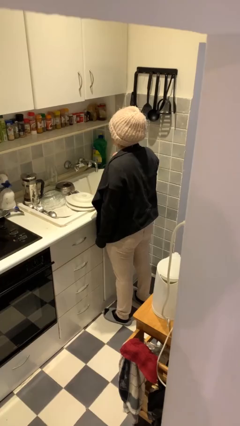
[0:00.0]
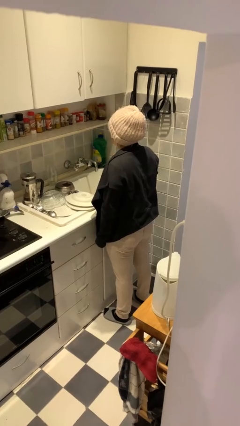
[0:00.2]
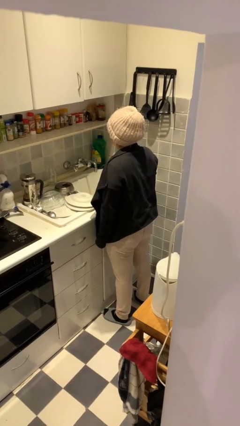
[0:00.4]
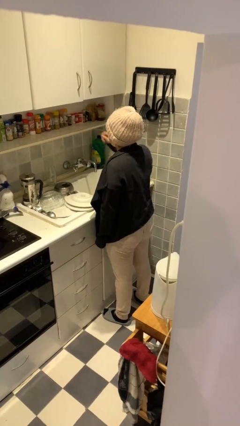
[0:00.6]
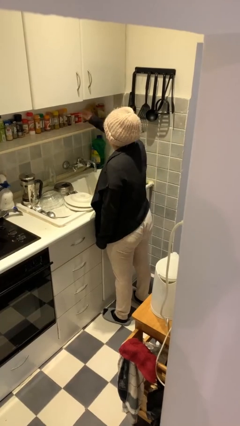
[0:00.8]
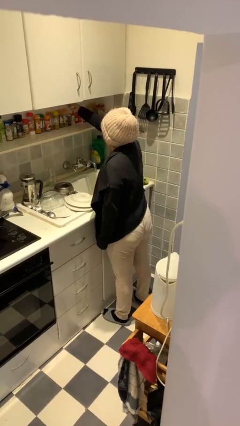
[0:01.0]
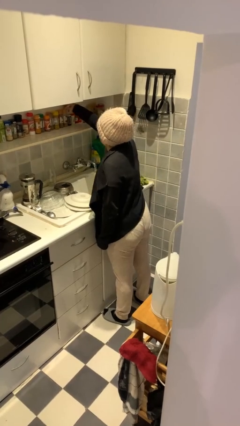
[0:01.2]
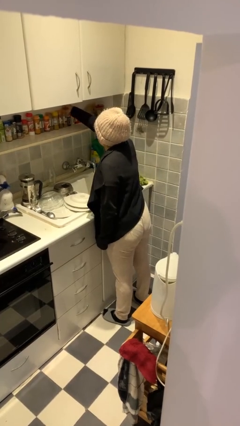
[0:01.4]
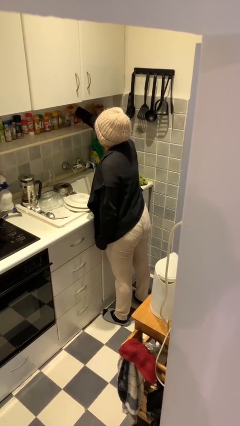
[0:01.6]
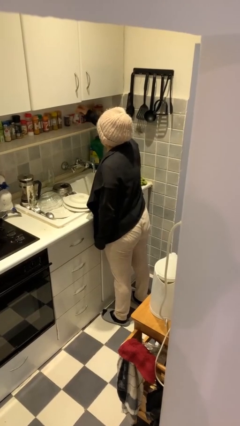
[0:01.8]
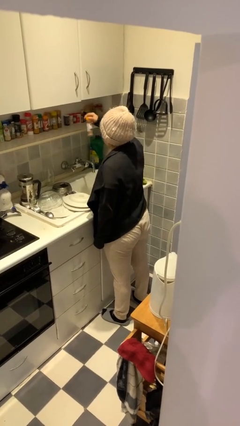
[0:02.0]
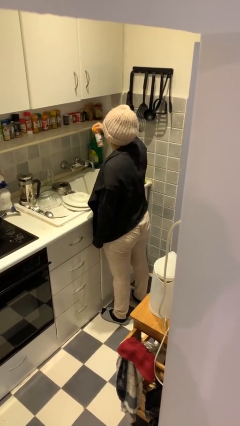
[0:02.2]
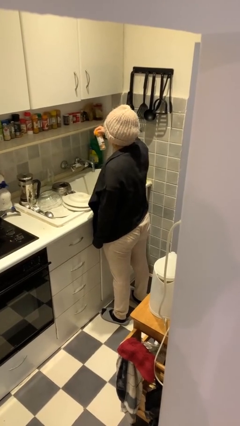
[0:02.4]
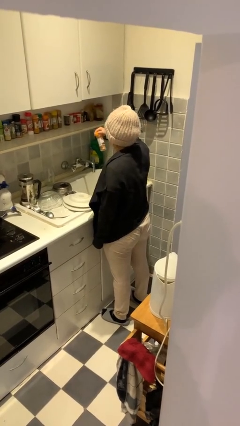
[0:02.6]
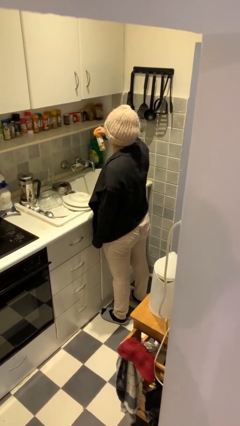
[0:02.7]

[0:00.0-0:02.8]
person picks up object from countertop

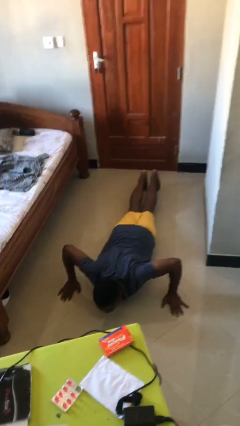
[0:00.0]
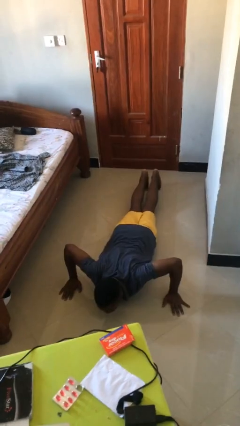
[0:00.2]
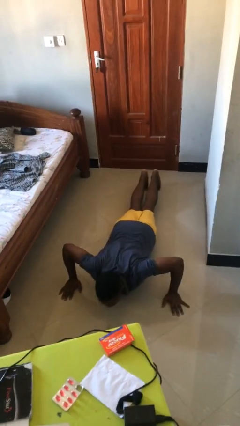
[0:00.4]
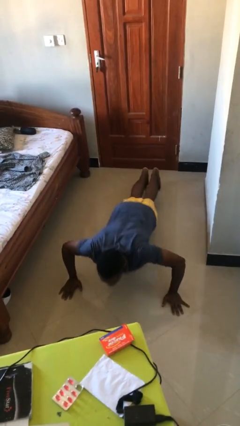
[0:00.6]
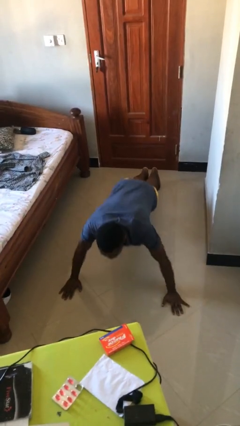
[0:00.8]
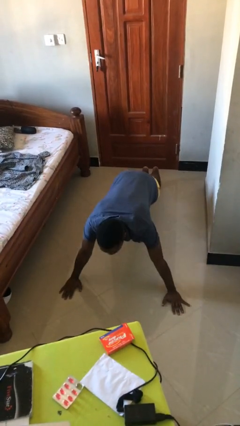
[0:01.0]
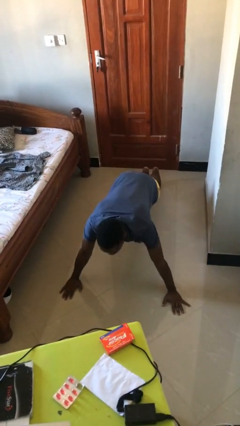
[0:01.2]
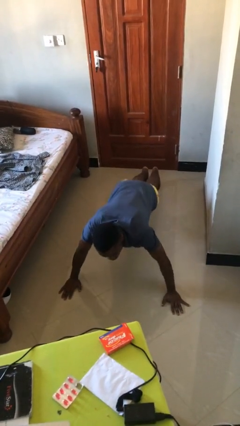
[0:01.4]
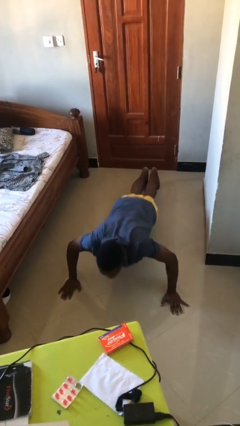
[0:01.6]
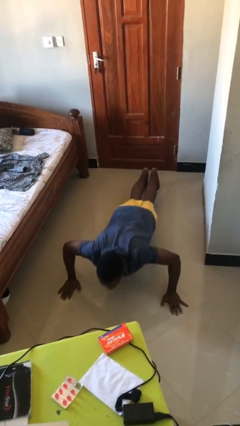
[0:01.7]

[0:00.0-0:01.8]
person exercises with pushup

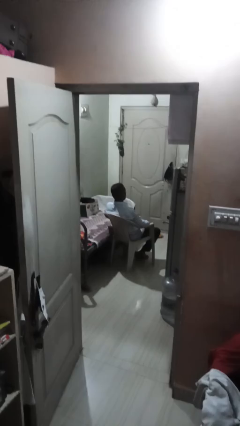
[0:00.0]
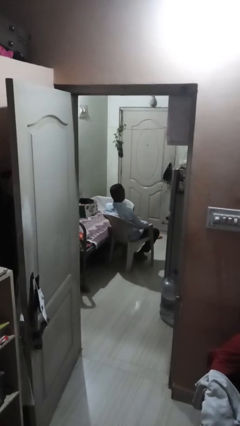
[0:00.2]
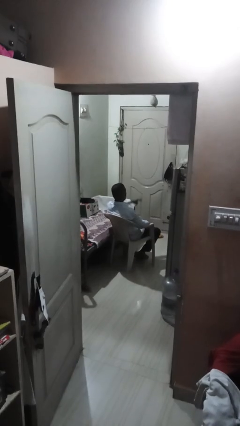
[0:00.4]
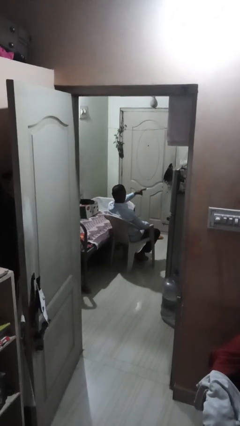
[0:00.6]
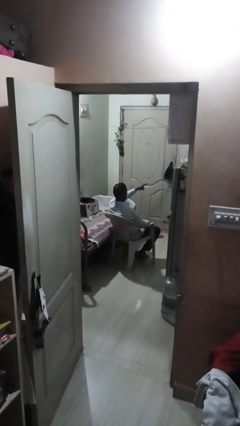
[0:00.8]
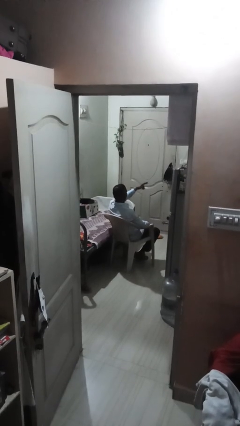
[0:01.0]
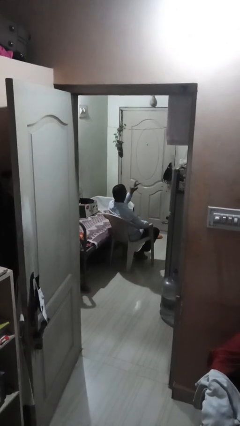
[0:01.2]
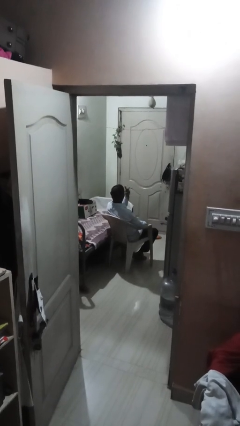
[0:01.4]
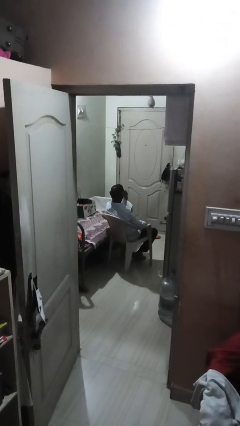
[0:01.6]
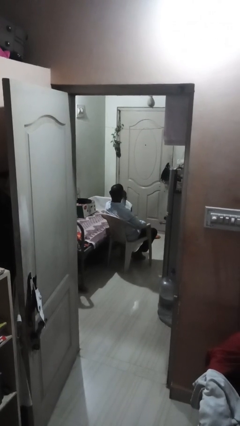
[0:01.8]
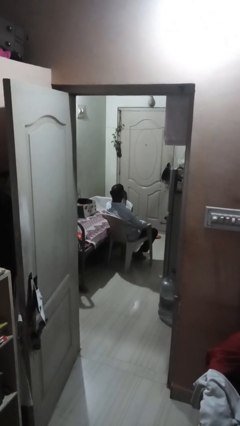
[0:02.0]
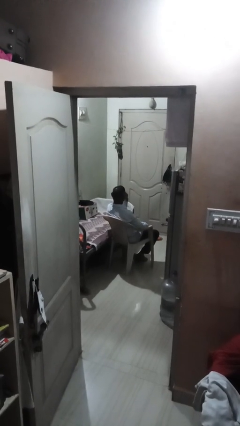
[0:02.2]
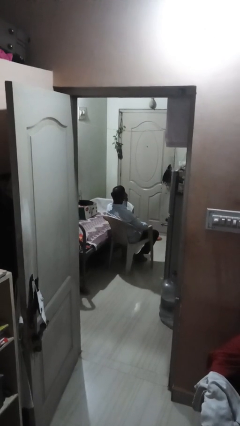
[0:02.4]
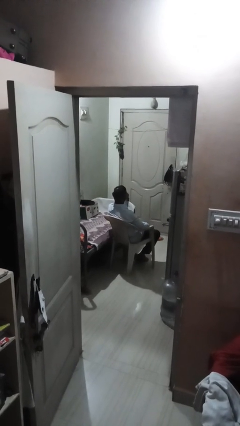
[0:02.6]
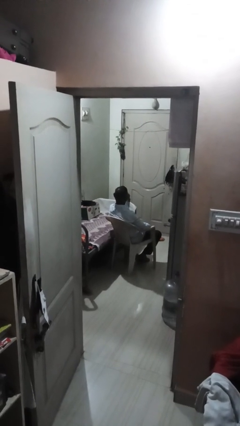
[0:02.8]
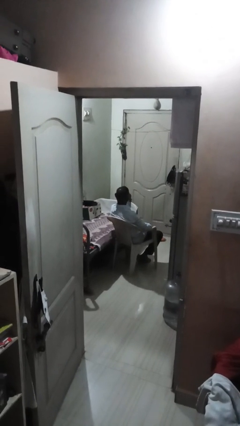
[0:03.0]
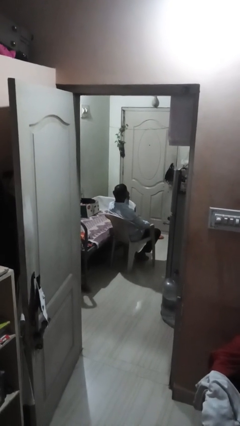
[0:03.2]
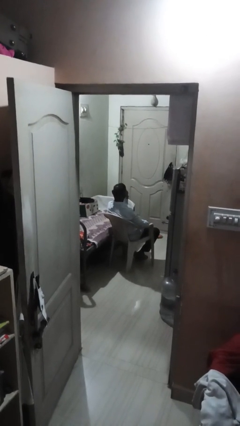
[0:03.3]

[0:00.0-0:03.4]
person gestures watch closely

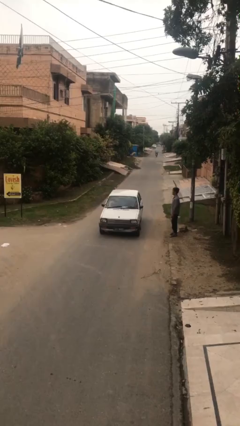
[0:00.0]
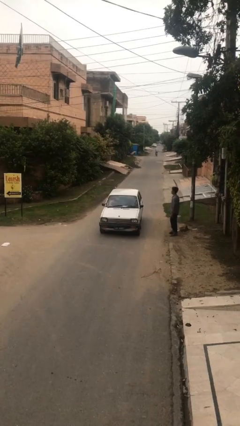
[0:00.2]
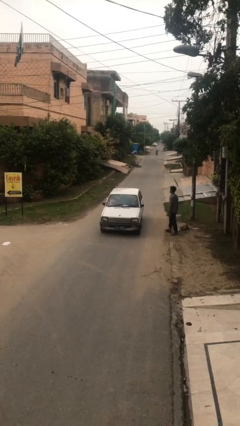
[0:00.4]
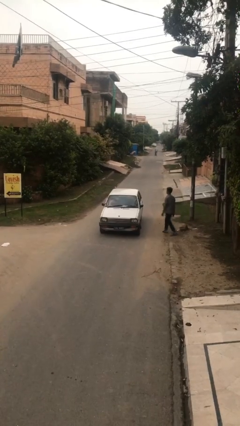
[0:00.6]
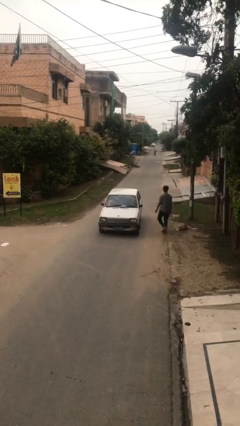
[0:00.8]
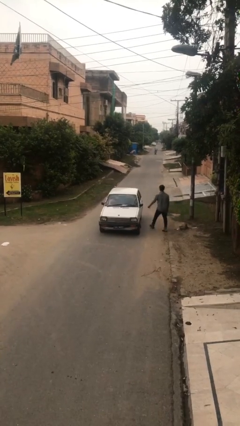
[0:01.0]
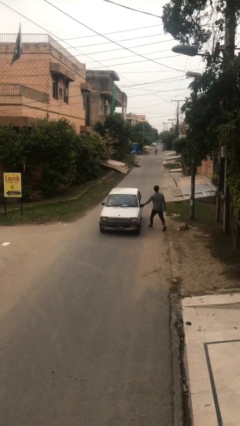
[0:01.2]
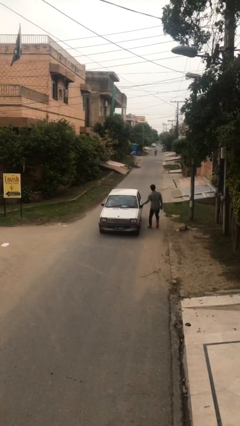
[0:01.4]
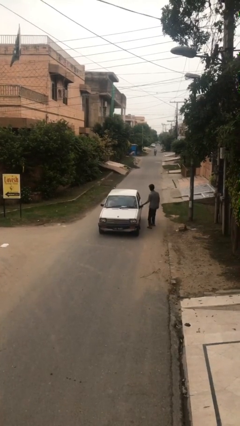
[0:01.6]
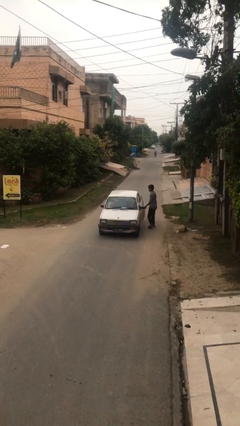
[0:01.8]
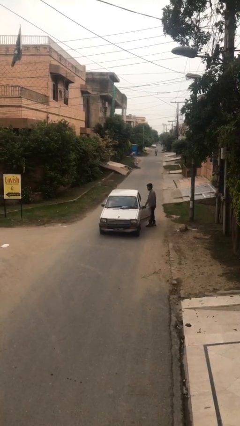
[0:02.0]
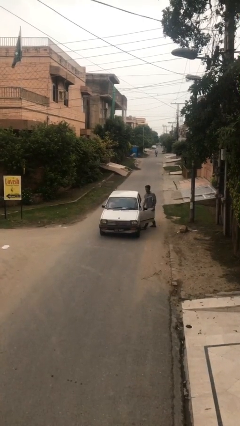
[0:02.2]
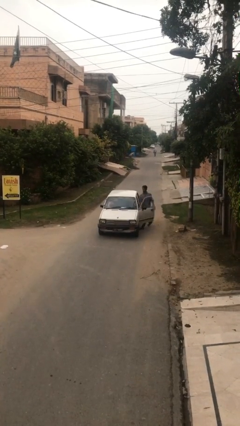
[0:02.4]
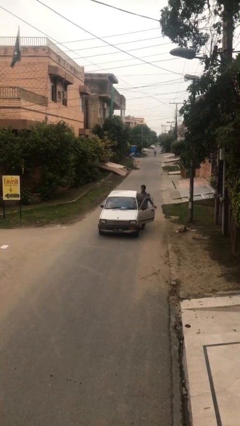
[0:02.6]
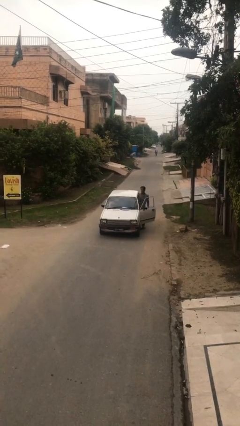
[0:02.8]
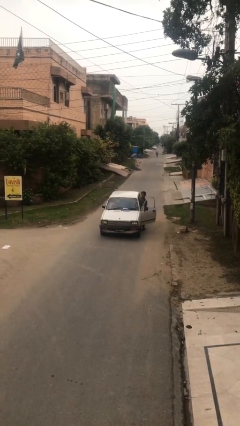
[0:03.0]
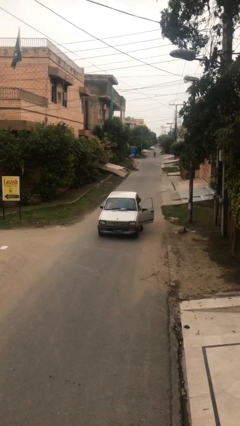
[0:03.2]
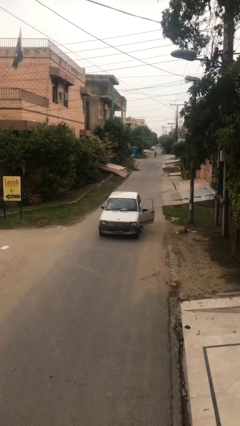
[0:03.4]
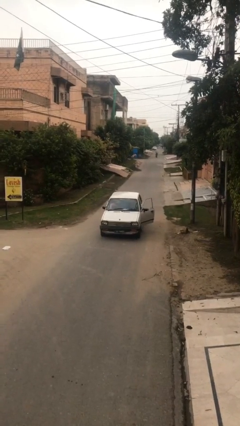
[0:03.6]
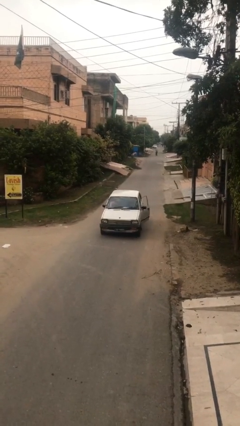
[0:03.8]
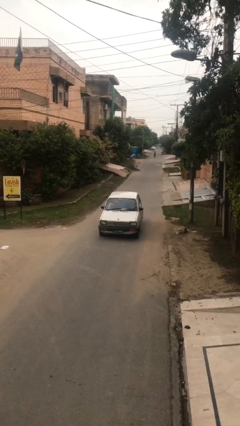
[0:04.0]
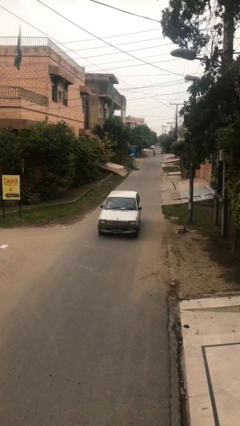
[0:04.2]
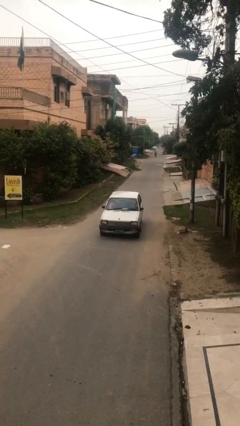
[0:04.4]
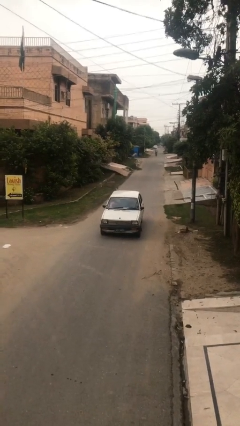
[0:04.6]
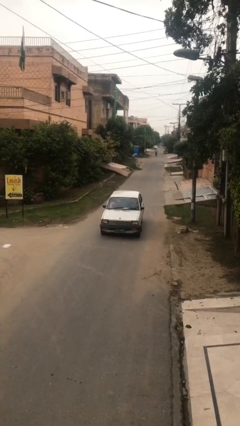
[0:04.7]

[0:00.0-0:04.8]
car picks up person

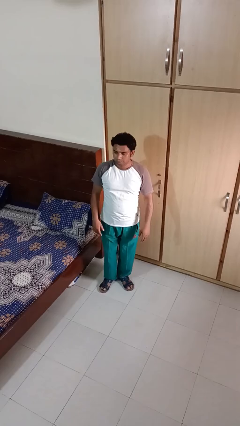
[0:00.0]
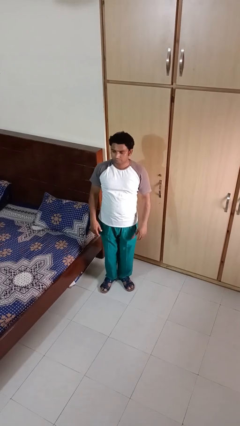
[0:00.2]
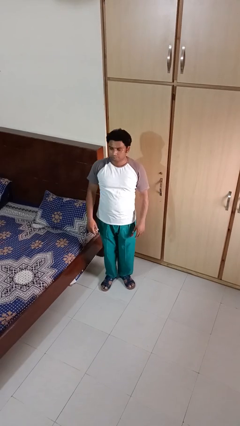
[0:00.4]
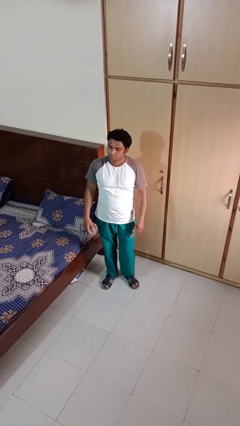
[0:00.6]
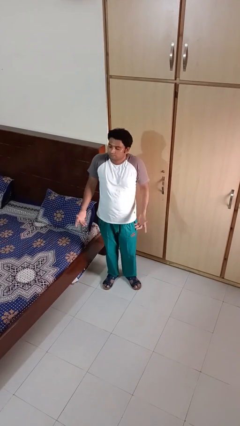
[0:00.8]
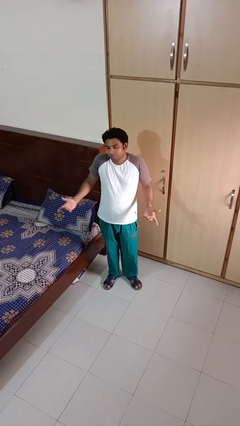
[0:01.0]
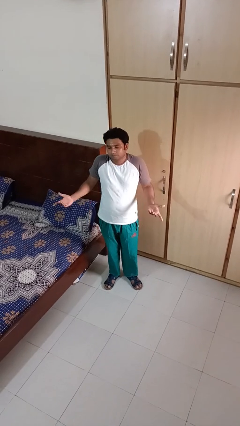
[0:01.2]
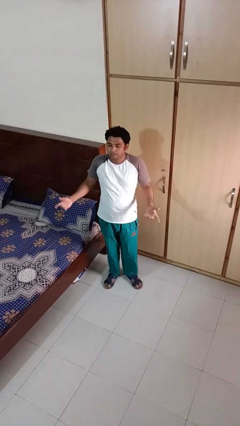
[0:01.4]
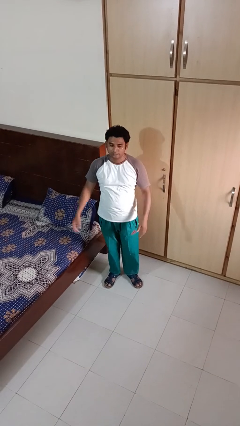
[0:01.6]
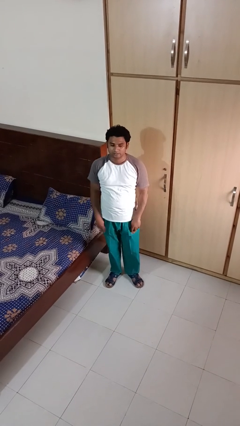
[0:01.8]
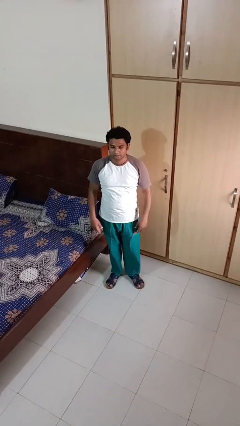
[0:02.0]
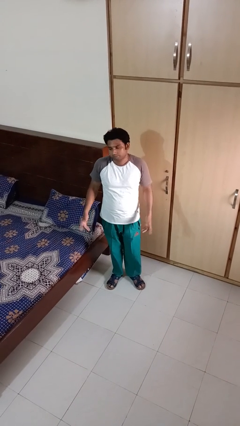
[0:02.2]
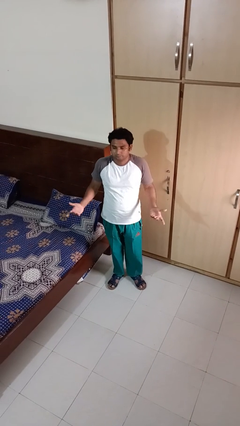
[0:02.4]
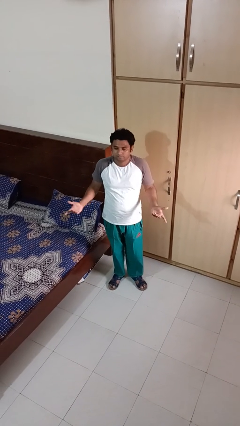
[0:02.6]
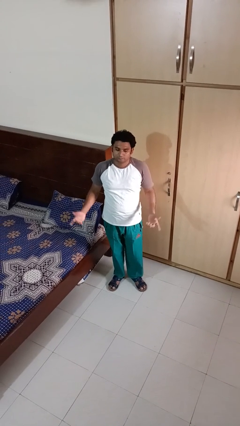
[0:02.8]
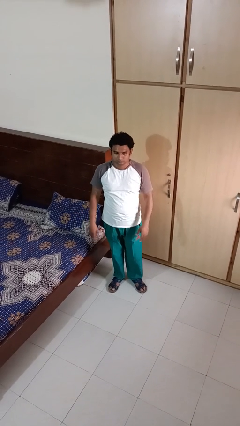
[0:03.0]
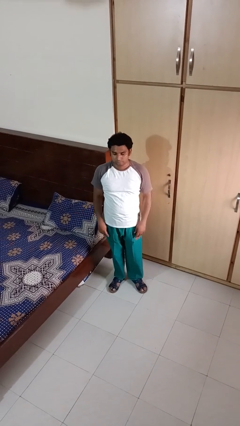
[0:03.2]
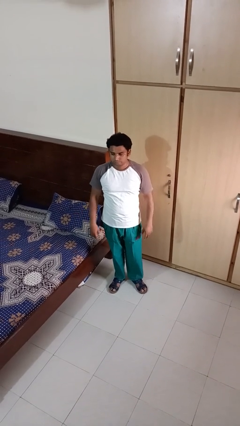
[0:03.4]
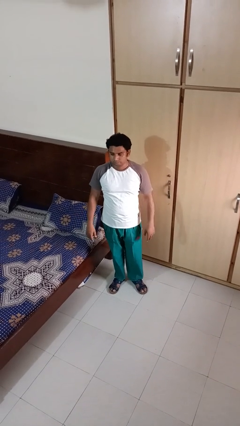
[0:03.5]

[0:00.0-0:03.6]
person shrugs

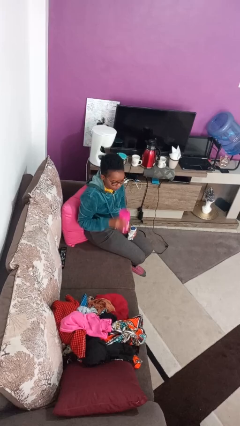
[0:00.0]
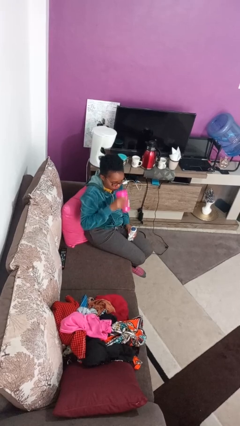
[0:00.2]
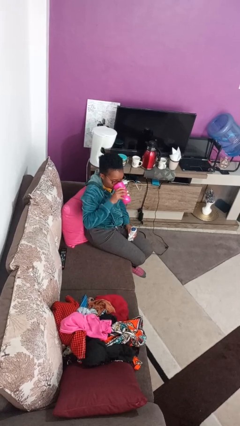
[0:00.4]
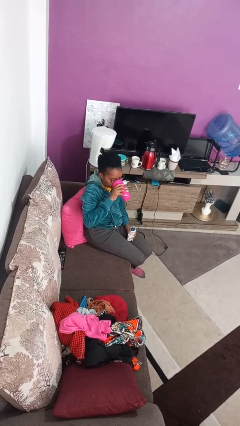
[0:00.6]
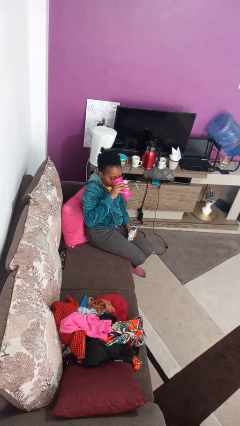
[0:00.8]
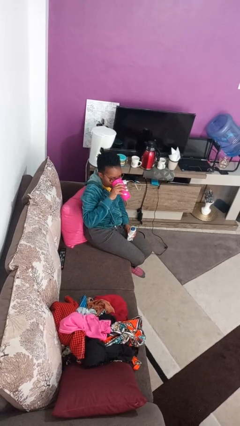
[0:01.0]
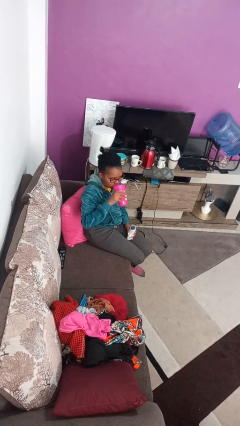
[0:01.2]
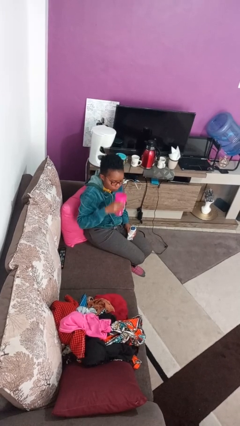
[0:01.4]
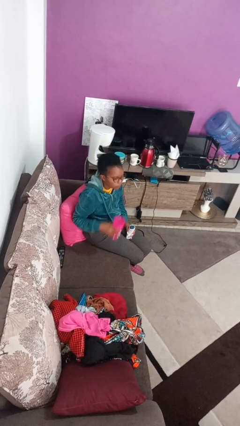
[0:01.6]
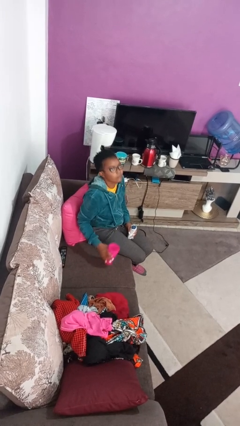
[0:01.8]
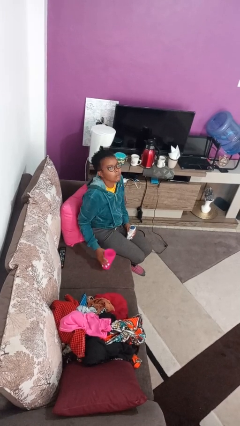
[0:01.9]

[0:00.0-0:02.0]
person drinks from cup
